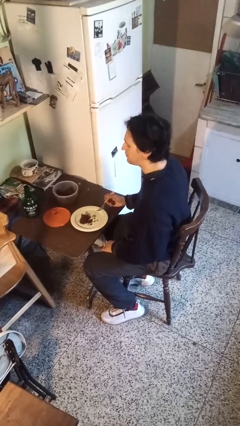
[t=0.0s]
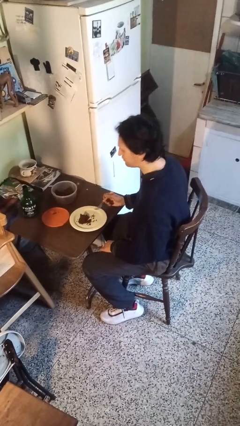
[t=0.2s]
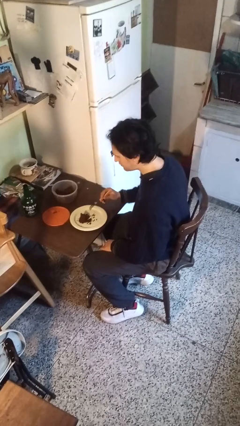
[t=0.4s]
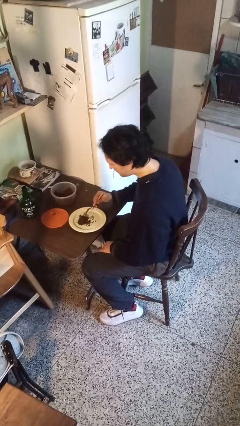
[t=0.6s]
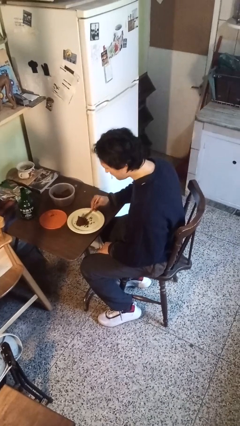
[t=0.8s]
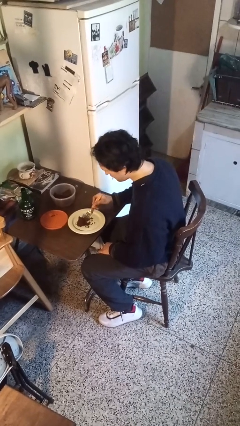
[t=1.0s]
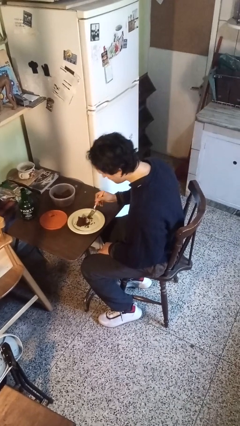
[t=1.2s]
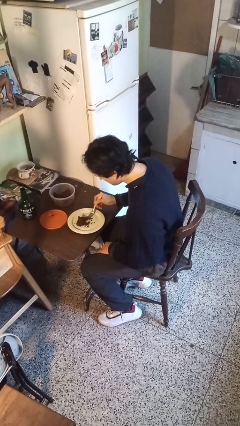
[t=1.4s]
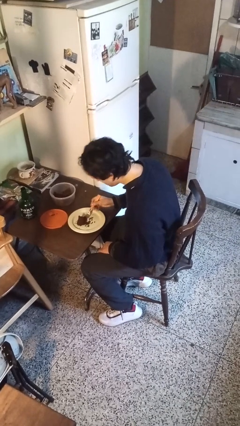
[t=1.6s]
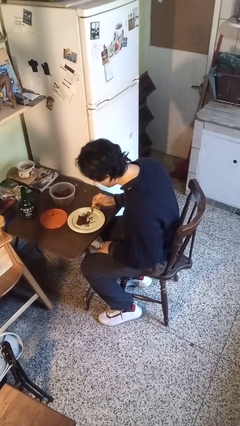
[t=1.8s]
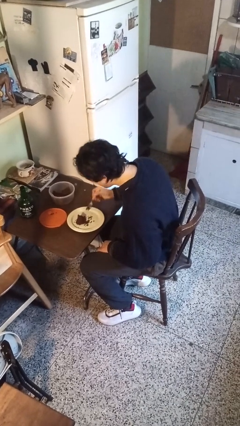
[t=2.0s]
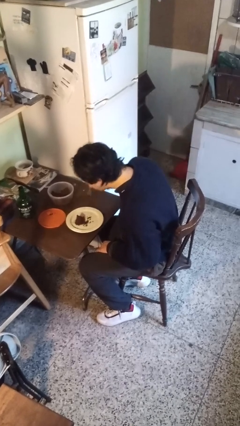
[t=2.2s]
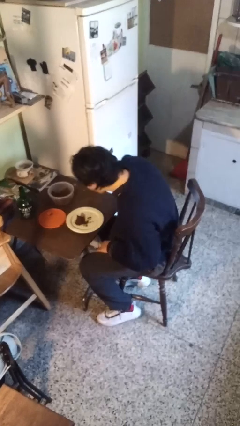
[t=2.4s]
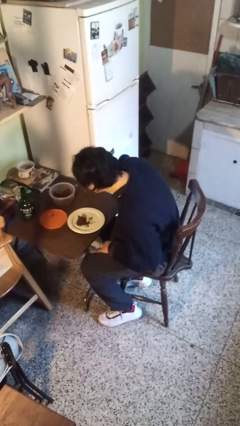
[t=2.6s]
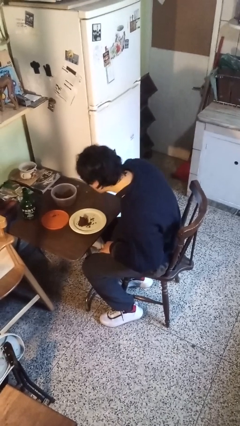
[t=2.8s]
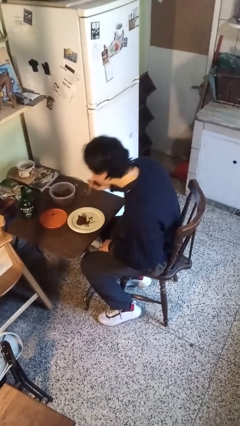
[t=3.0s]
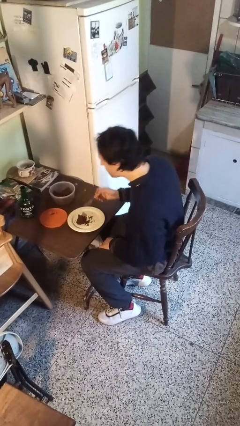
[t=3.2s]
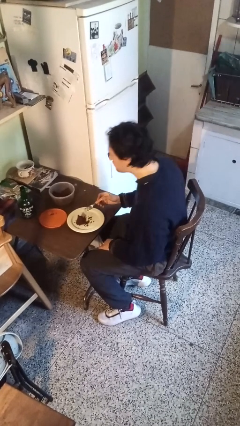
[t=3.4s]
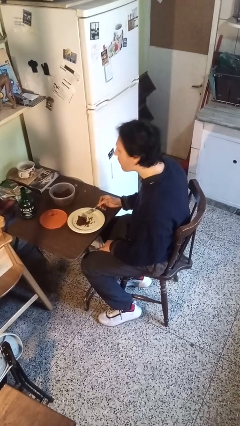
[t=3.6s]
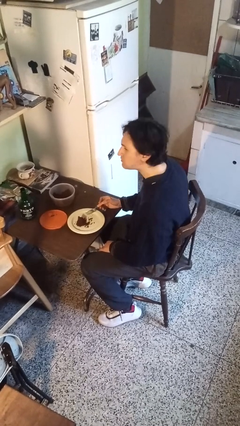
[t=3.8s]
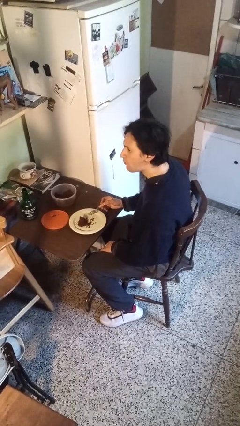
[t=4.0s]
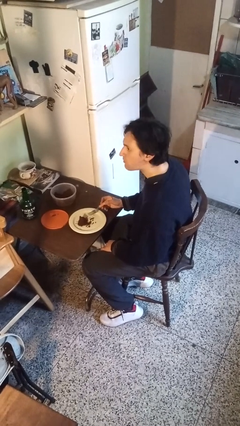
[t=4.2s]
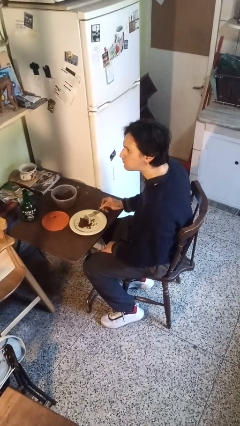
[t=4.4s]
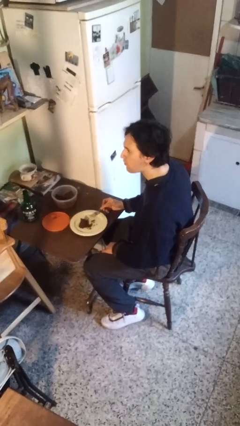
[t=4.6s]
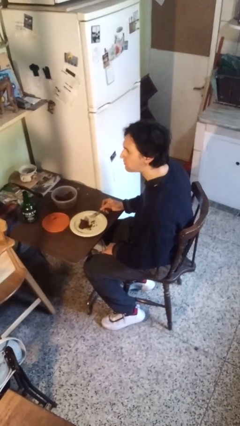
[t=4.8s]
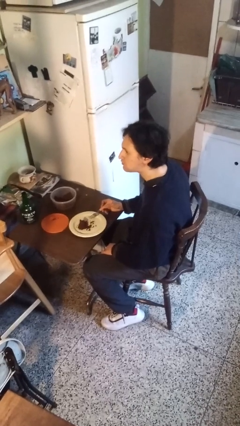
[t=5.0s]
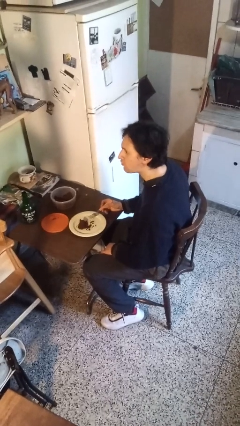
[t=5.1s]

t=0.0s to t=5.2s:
person eats with utensil

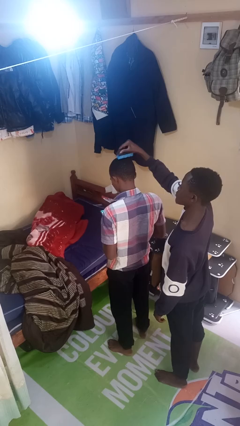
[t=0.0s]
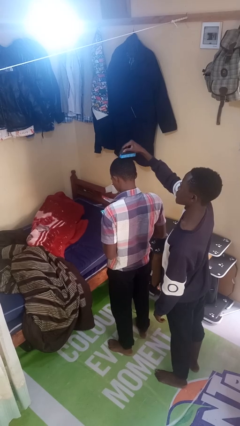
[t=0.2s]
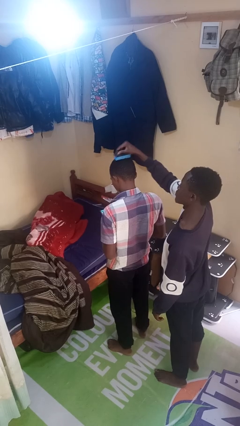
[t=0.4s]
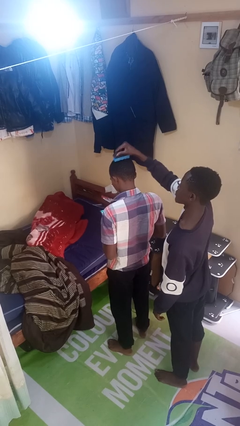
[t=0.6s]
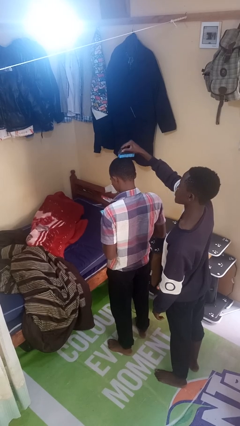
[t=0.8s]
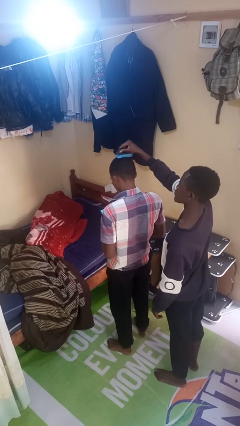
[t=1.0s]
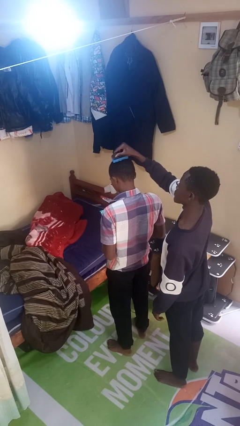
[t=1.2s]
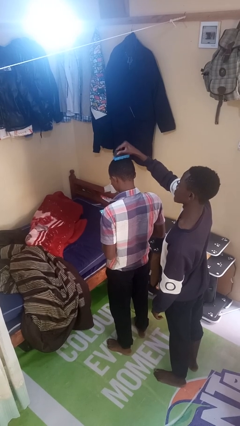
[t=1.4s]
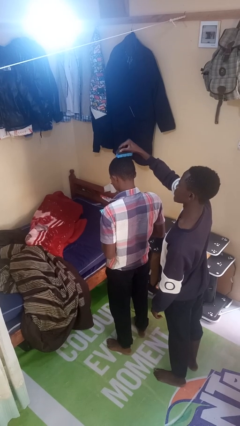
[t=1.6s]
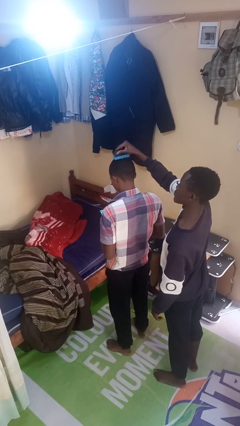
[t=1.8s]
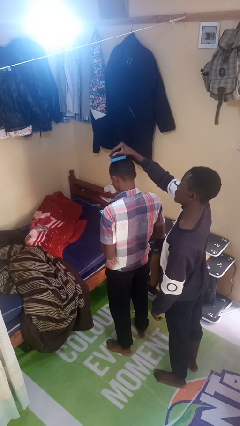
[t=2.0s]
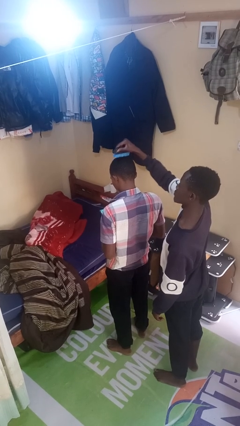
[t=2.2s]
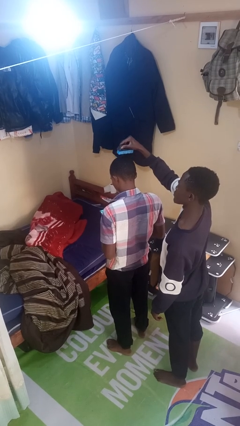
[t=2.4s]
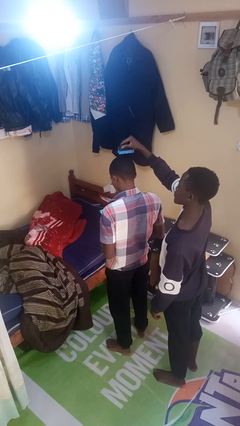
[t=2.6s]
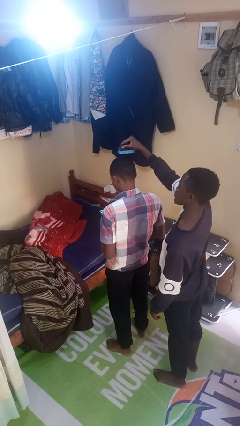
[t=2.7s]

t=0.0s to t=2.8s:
person brushes hair of person

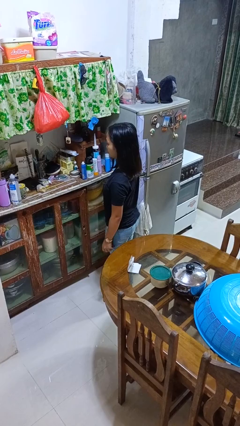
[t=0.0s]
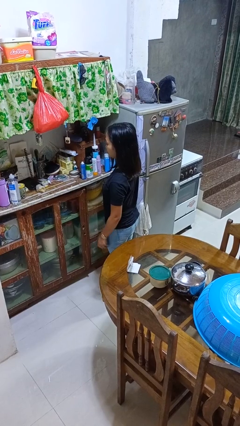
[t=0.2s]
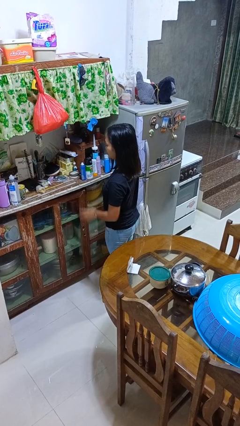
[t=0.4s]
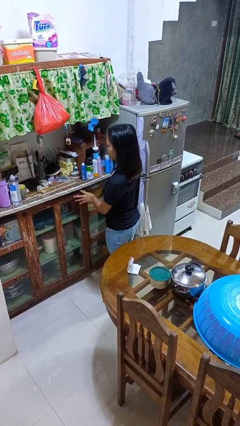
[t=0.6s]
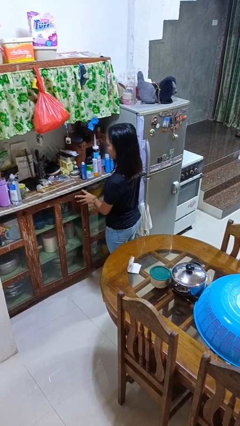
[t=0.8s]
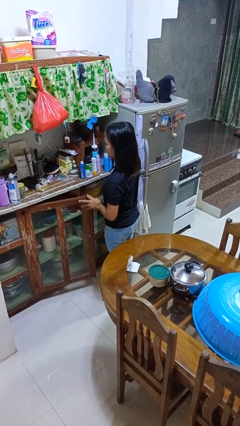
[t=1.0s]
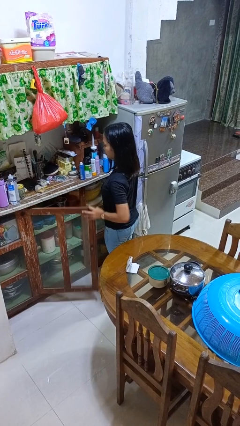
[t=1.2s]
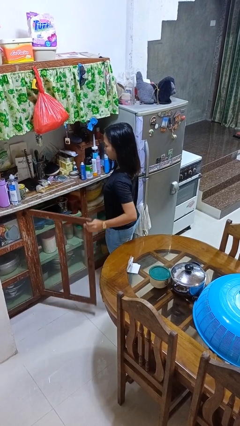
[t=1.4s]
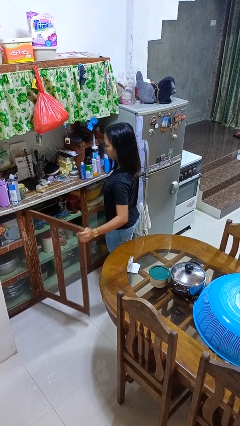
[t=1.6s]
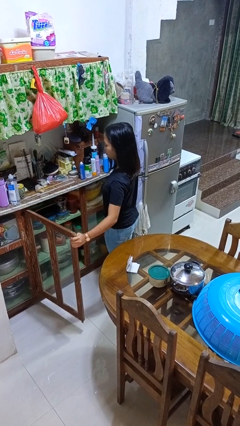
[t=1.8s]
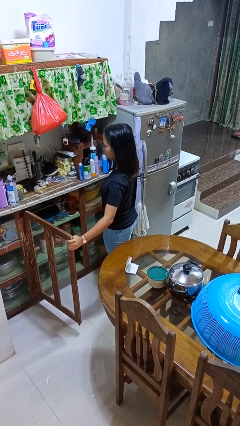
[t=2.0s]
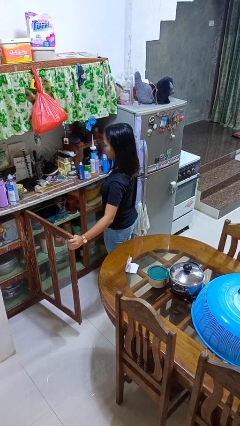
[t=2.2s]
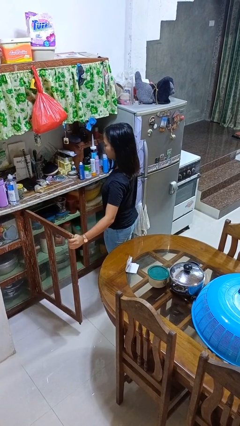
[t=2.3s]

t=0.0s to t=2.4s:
person opens cabinet

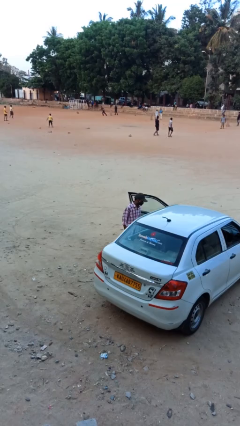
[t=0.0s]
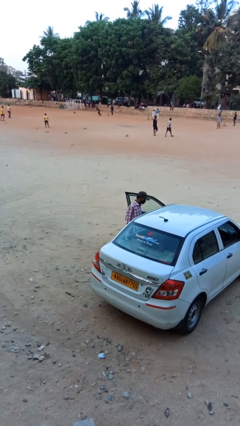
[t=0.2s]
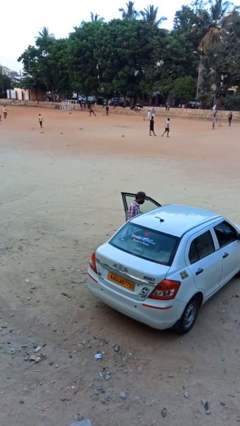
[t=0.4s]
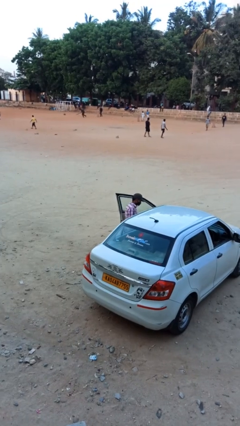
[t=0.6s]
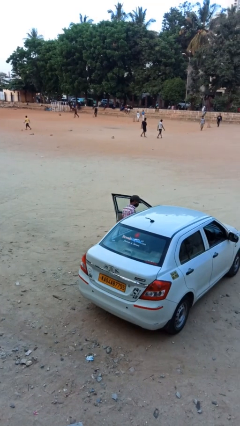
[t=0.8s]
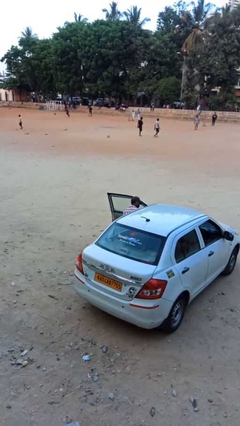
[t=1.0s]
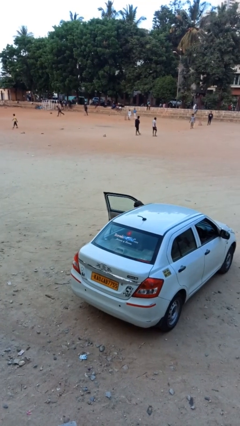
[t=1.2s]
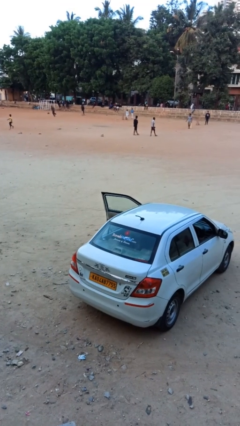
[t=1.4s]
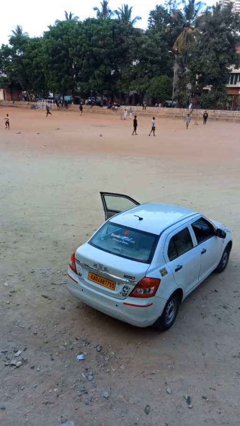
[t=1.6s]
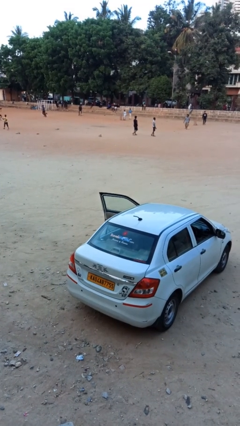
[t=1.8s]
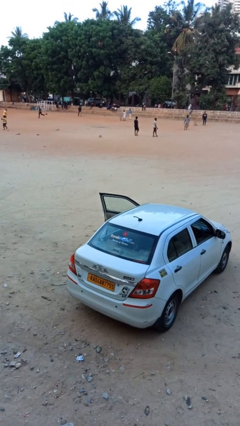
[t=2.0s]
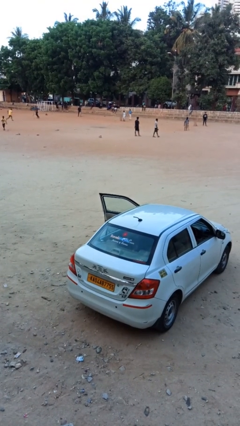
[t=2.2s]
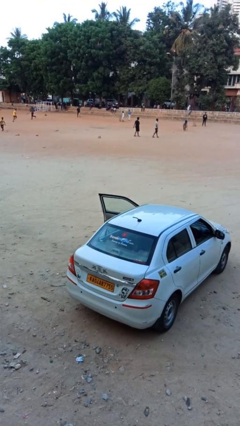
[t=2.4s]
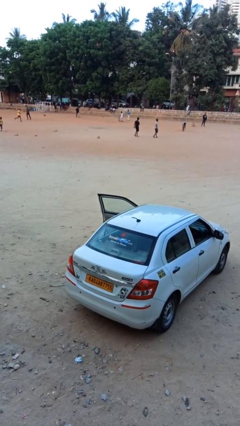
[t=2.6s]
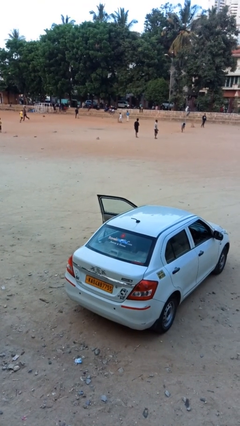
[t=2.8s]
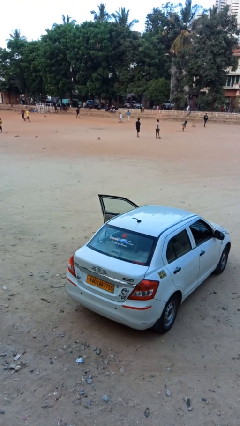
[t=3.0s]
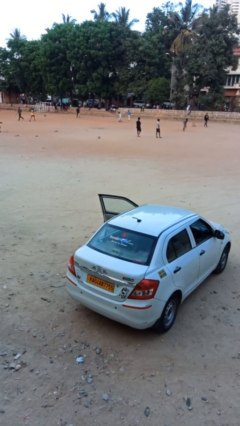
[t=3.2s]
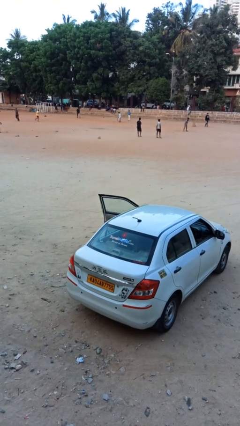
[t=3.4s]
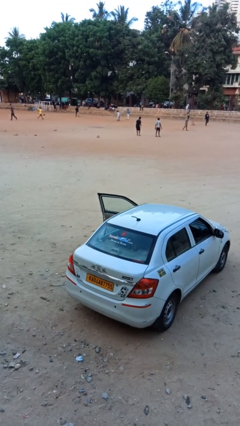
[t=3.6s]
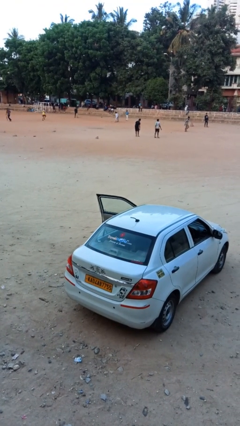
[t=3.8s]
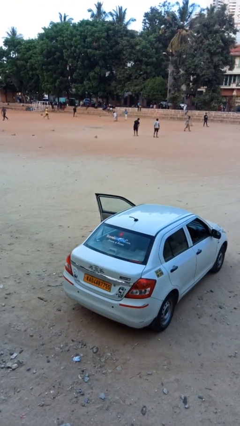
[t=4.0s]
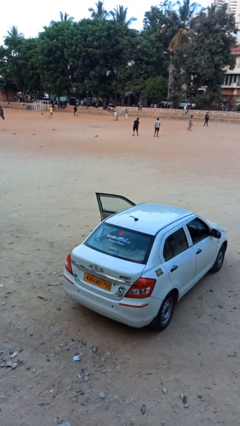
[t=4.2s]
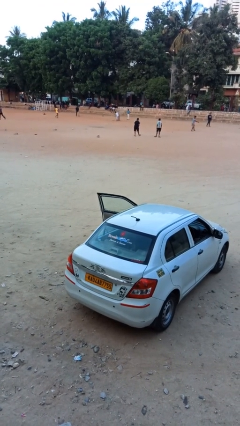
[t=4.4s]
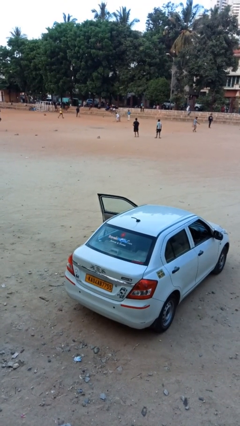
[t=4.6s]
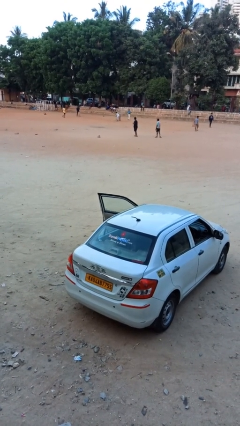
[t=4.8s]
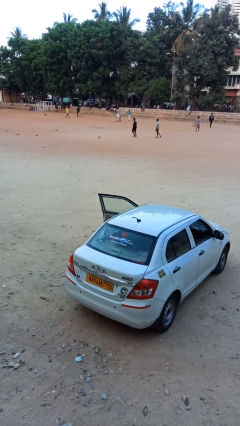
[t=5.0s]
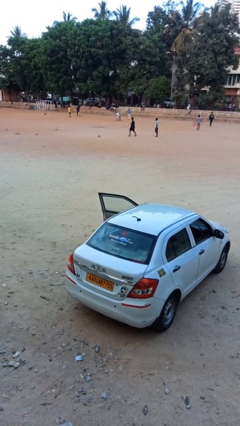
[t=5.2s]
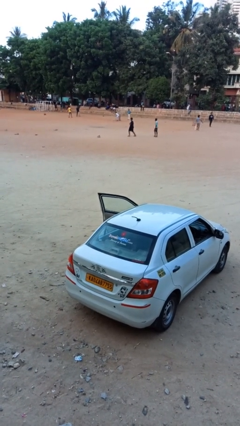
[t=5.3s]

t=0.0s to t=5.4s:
person enters car

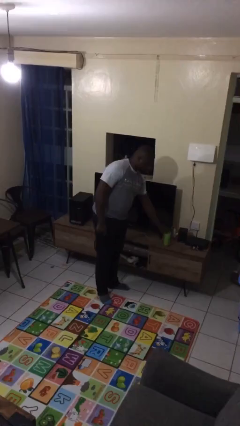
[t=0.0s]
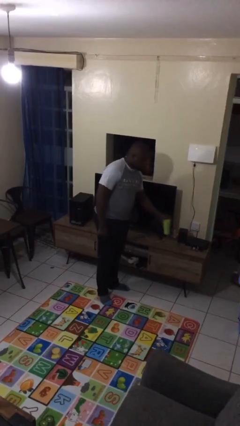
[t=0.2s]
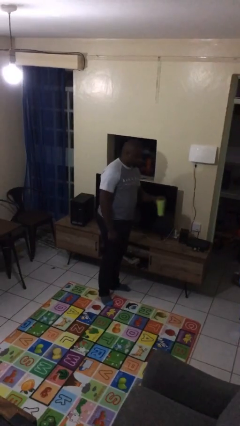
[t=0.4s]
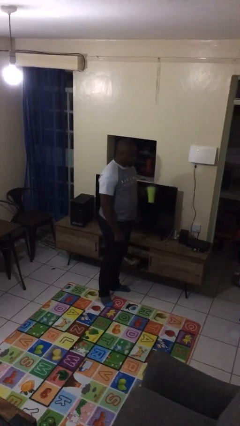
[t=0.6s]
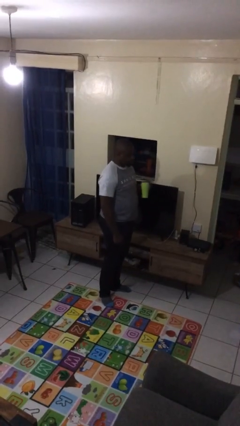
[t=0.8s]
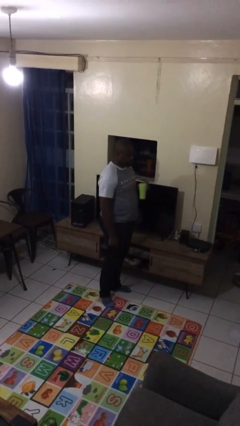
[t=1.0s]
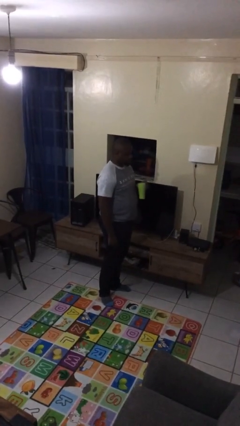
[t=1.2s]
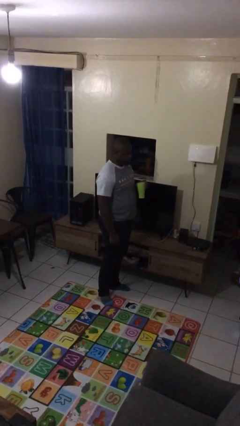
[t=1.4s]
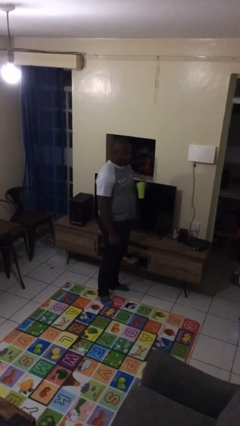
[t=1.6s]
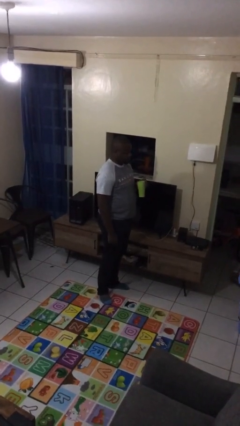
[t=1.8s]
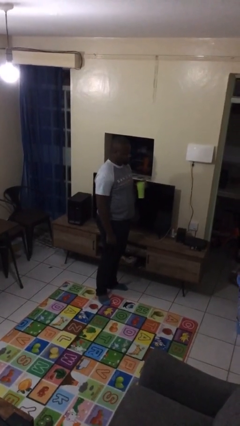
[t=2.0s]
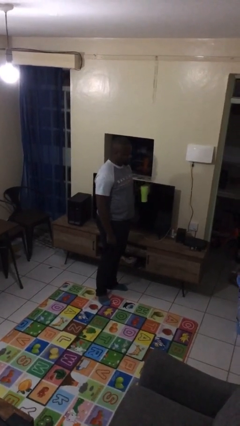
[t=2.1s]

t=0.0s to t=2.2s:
person picks up object from countertop
